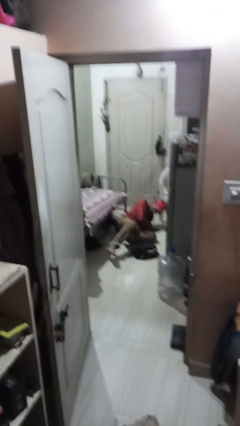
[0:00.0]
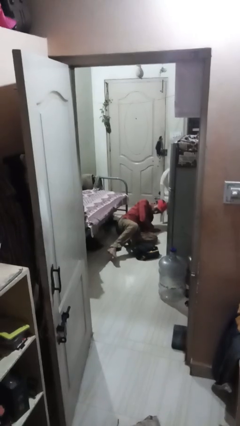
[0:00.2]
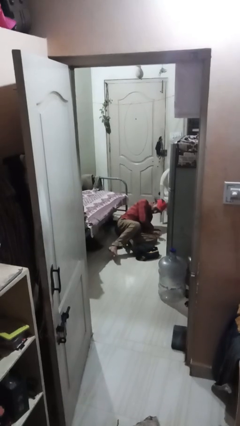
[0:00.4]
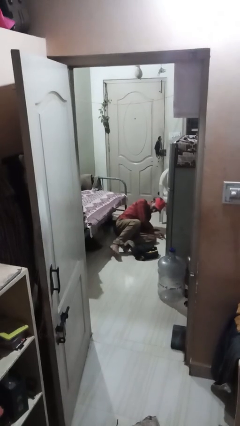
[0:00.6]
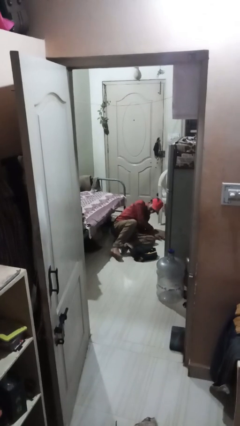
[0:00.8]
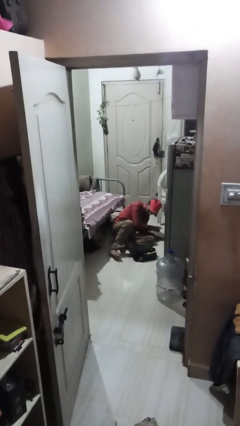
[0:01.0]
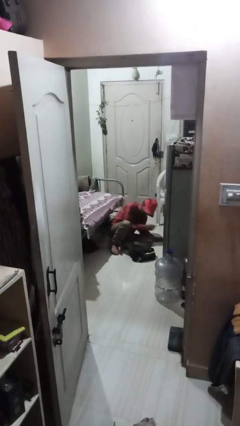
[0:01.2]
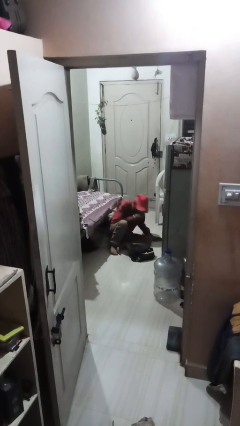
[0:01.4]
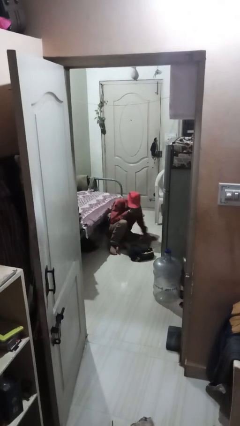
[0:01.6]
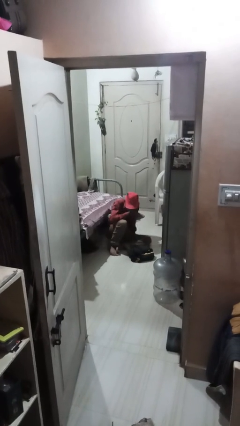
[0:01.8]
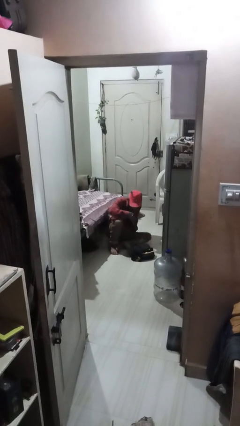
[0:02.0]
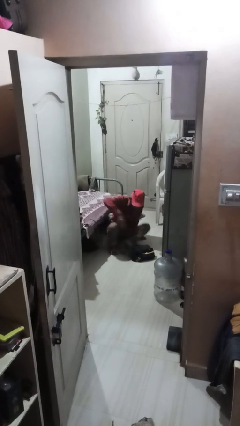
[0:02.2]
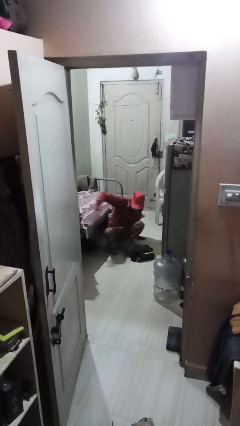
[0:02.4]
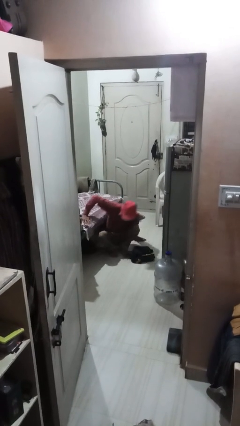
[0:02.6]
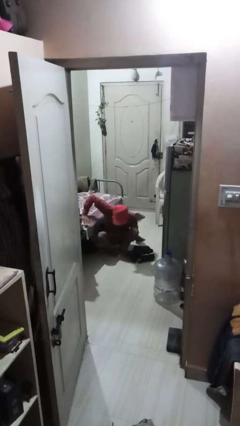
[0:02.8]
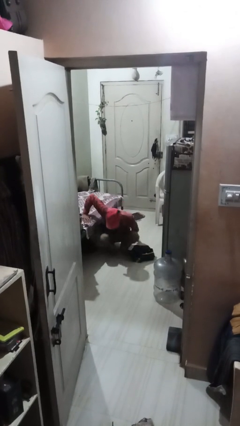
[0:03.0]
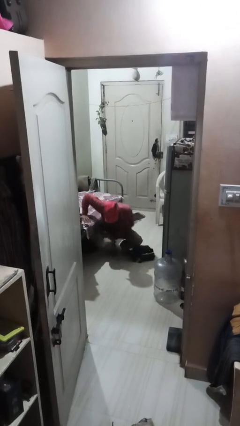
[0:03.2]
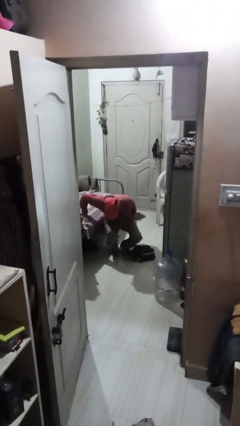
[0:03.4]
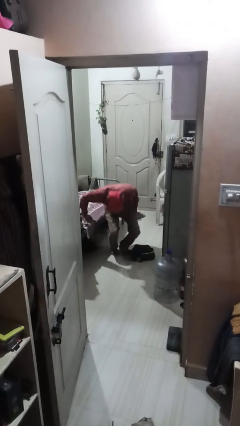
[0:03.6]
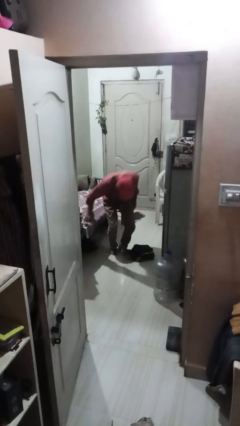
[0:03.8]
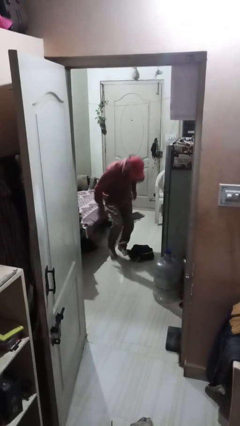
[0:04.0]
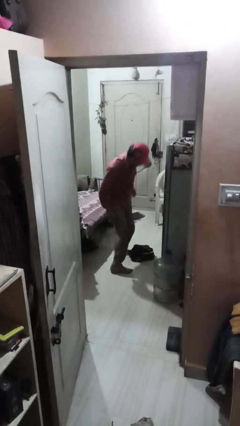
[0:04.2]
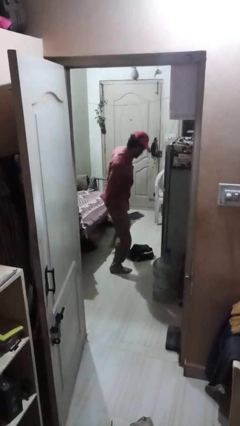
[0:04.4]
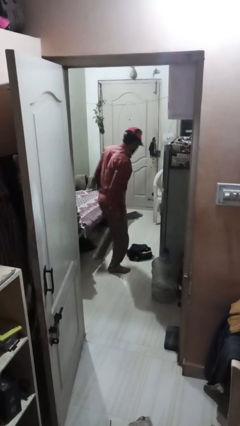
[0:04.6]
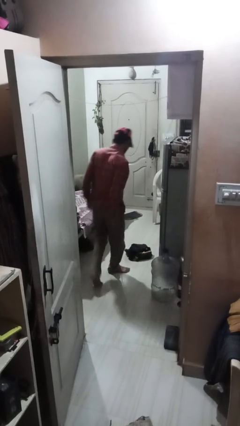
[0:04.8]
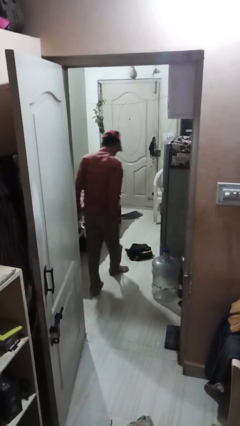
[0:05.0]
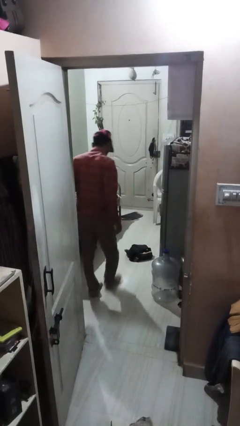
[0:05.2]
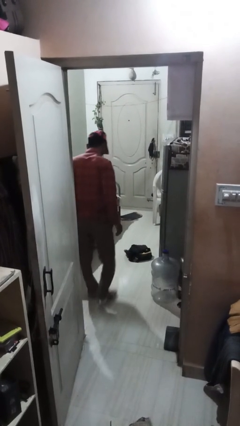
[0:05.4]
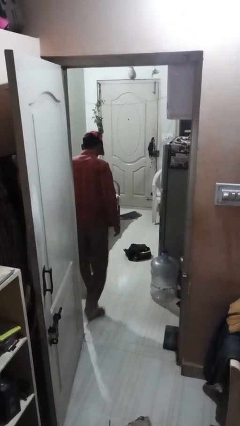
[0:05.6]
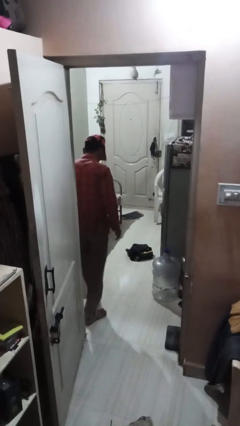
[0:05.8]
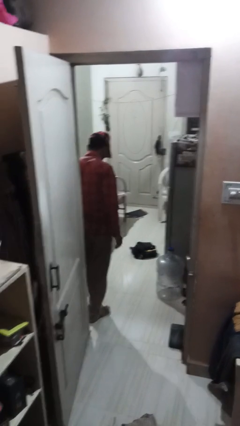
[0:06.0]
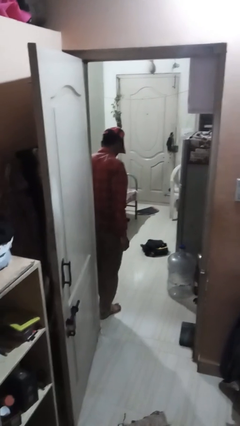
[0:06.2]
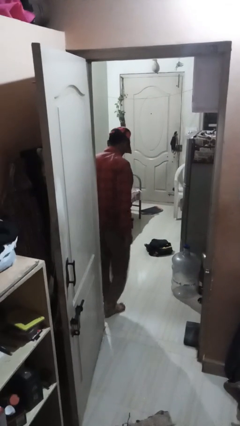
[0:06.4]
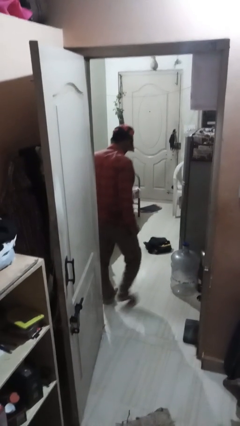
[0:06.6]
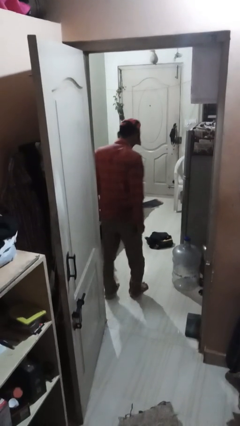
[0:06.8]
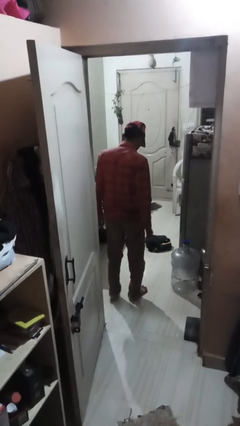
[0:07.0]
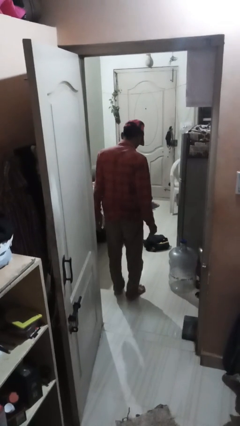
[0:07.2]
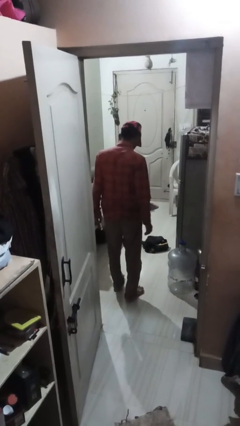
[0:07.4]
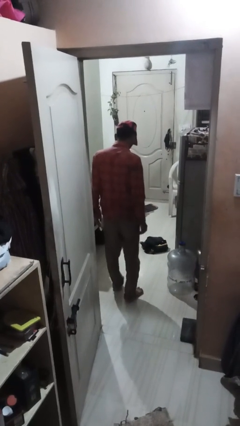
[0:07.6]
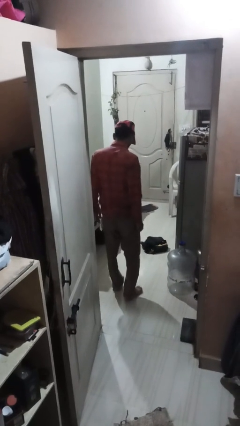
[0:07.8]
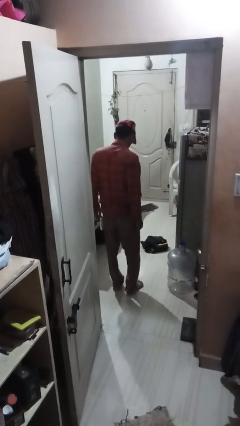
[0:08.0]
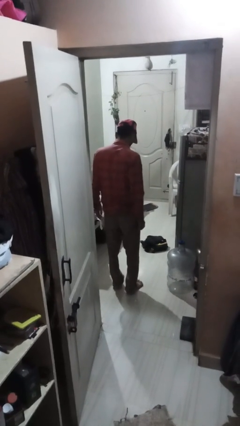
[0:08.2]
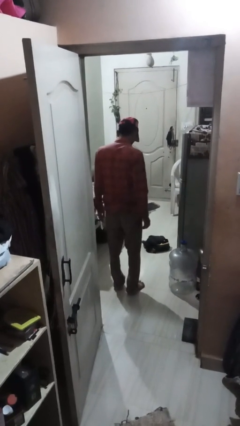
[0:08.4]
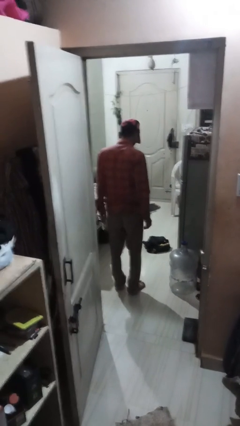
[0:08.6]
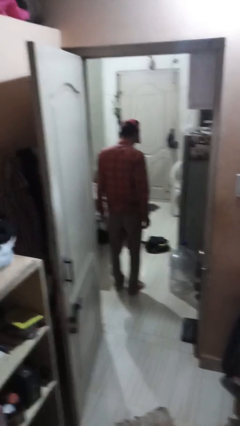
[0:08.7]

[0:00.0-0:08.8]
person stands up from floor

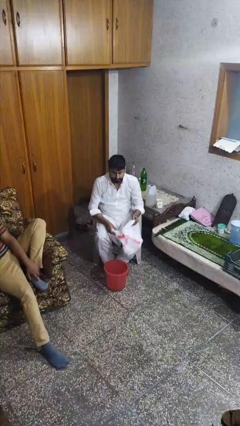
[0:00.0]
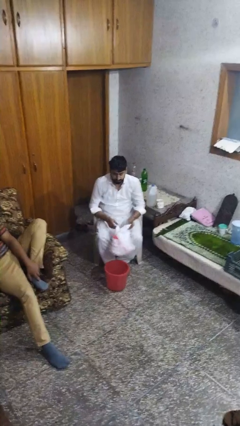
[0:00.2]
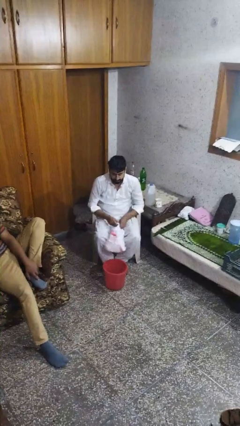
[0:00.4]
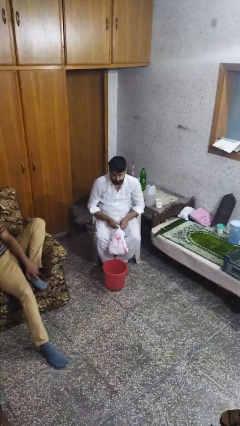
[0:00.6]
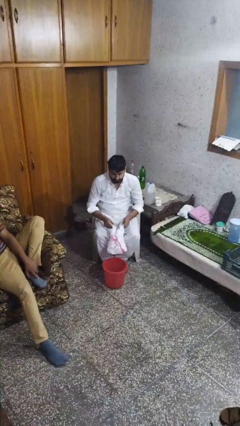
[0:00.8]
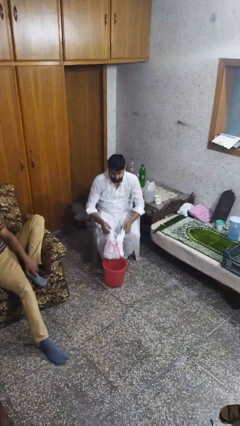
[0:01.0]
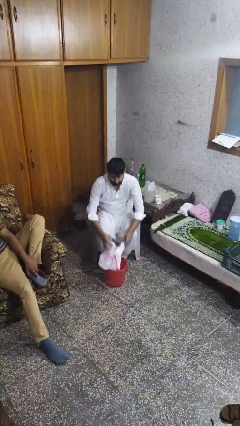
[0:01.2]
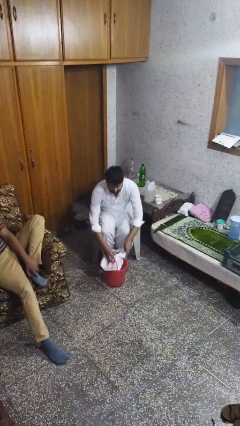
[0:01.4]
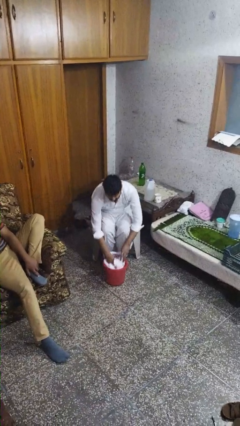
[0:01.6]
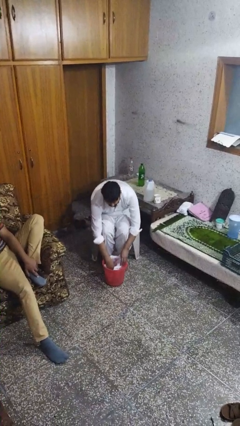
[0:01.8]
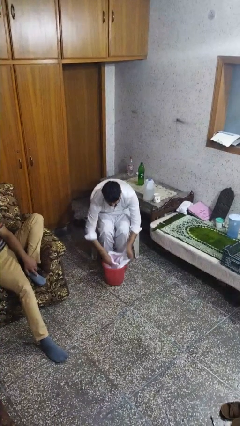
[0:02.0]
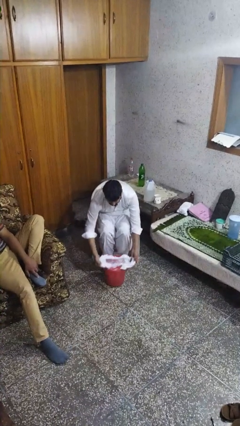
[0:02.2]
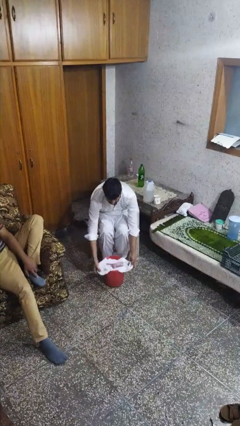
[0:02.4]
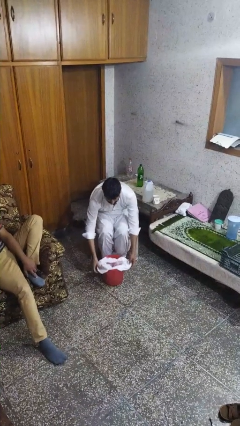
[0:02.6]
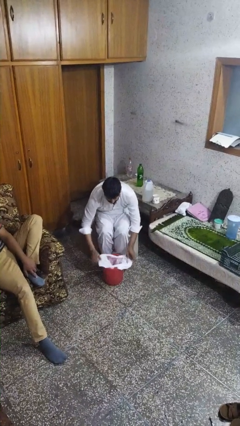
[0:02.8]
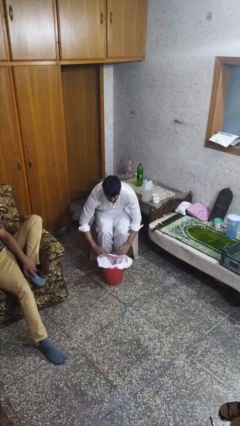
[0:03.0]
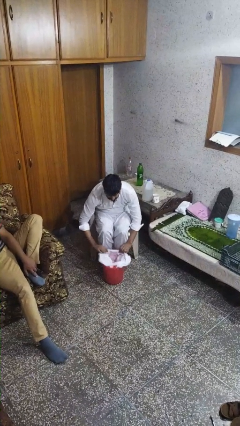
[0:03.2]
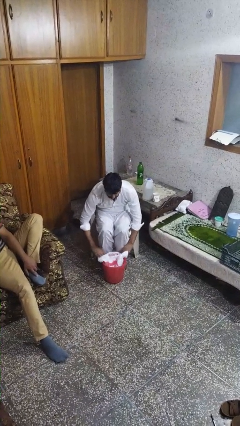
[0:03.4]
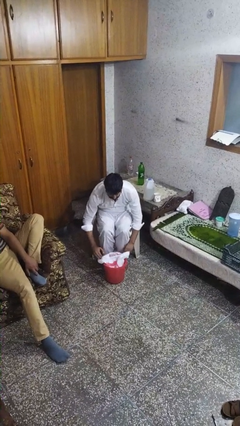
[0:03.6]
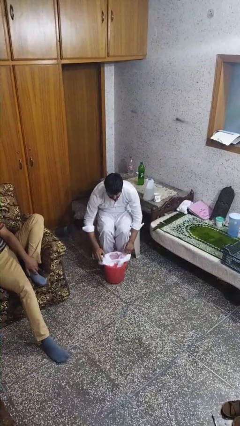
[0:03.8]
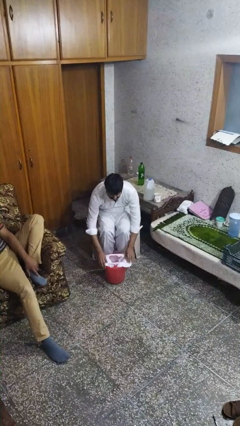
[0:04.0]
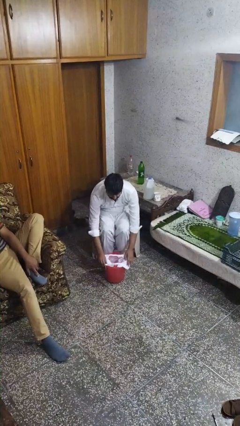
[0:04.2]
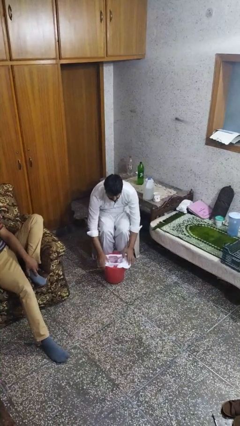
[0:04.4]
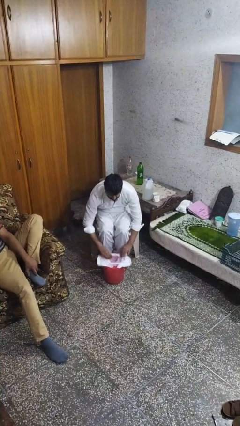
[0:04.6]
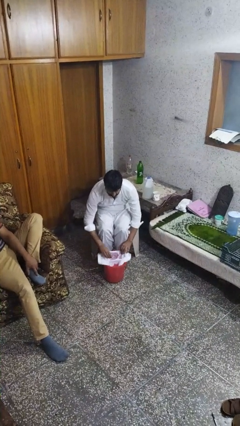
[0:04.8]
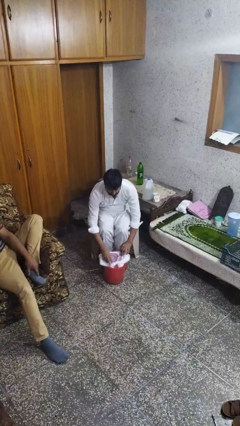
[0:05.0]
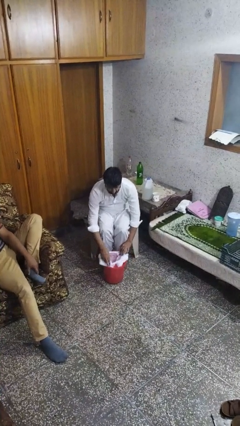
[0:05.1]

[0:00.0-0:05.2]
person inserts trashbag into trashcan

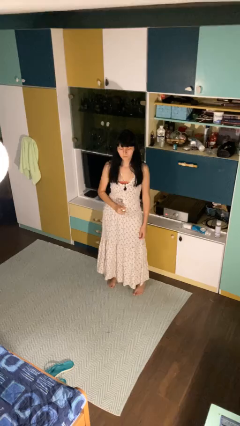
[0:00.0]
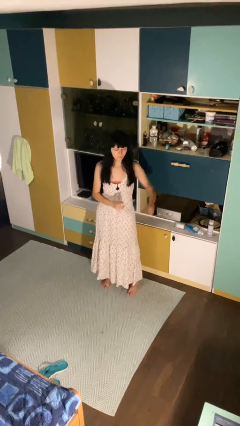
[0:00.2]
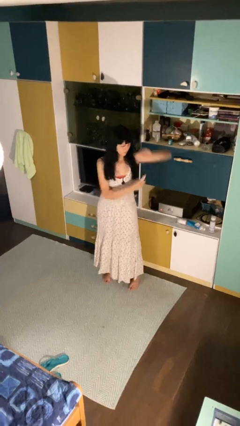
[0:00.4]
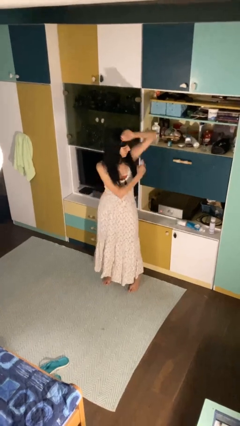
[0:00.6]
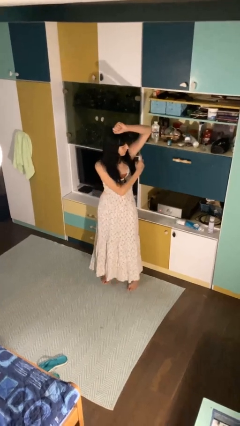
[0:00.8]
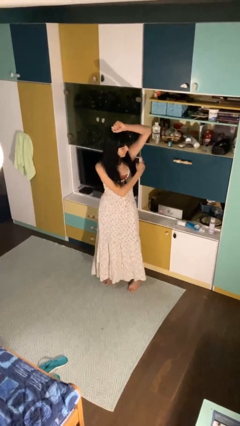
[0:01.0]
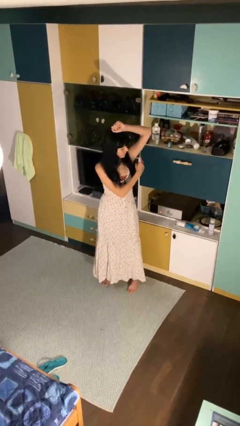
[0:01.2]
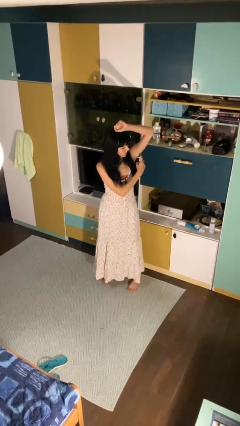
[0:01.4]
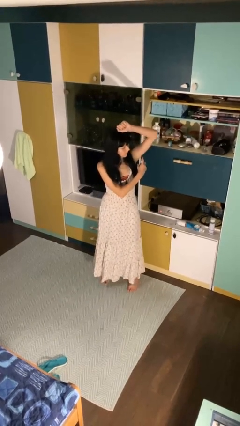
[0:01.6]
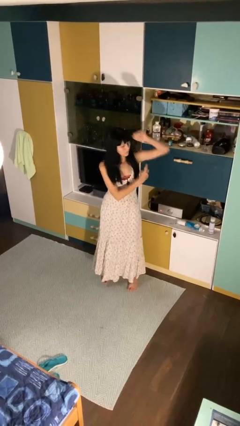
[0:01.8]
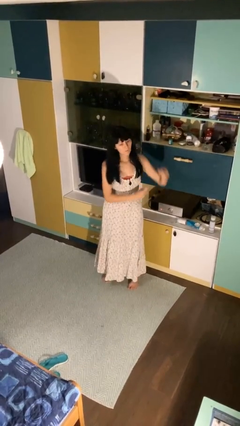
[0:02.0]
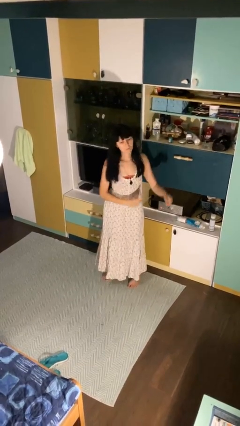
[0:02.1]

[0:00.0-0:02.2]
person applies deodorant

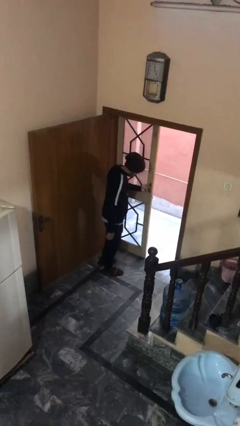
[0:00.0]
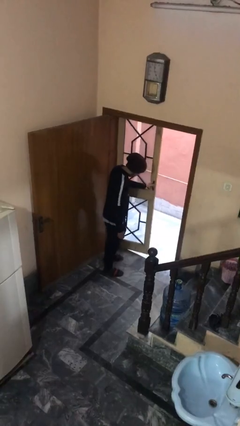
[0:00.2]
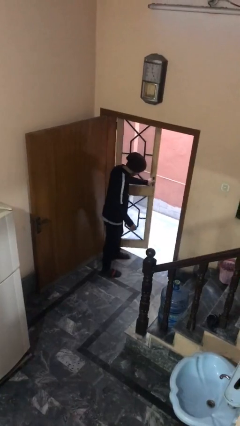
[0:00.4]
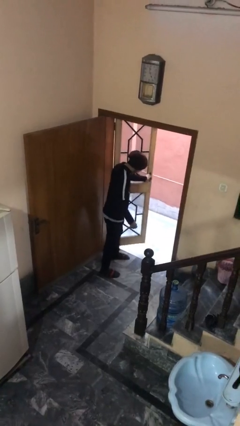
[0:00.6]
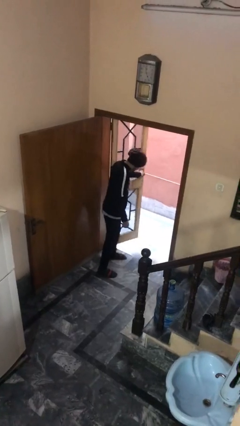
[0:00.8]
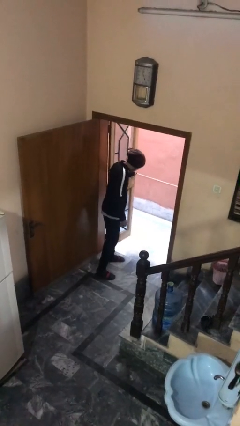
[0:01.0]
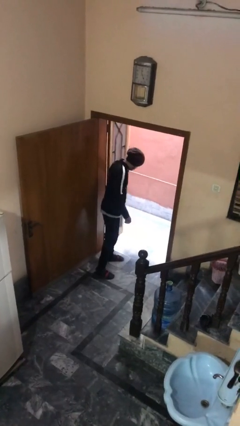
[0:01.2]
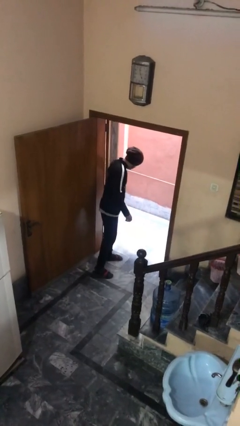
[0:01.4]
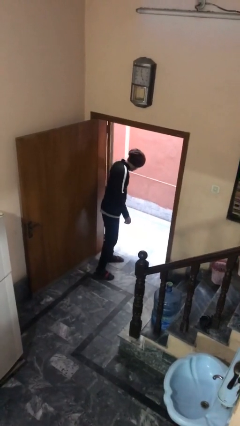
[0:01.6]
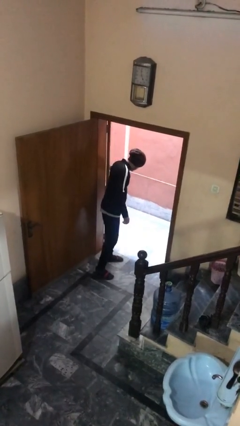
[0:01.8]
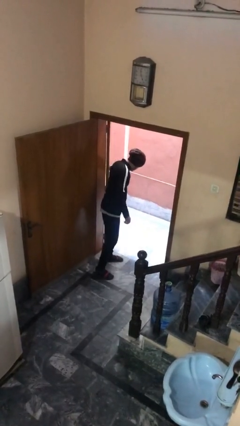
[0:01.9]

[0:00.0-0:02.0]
person opens facility door
